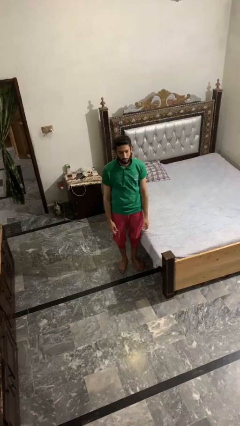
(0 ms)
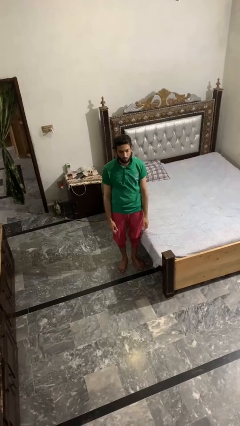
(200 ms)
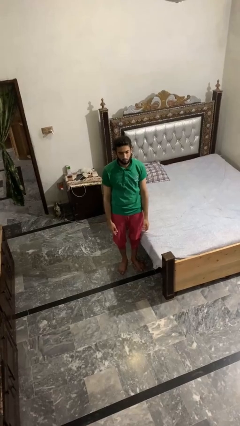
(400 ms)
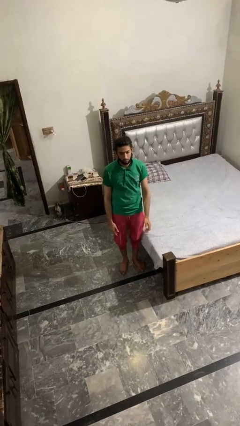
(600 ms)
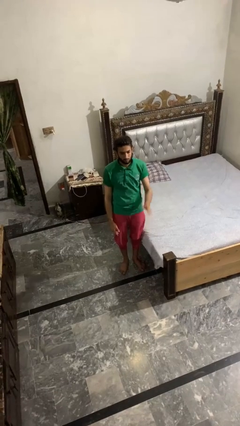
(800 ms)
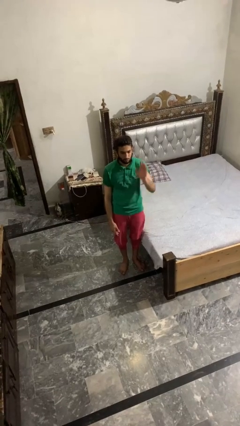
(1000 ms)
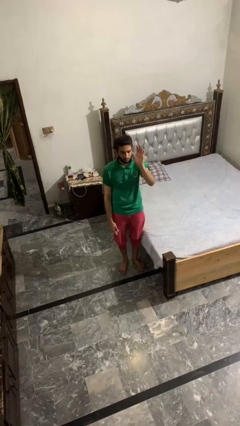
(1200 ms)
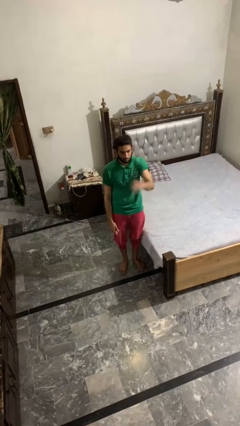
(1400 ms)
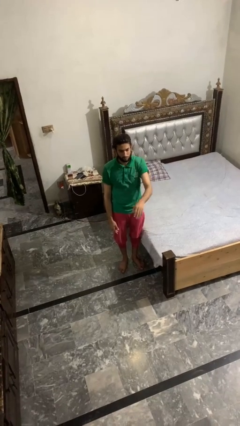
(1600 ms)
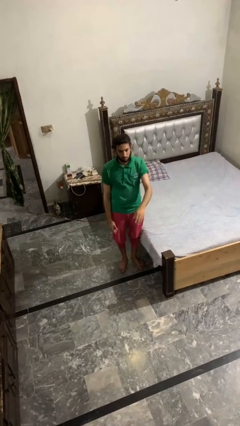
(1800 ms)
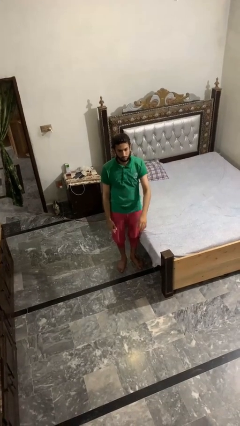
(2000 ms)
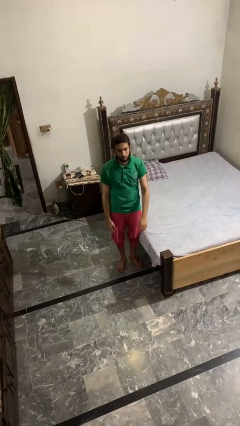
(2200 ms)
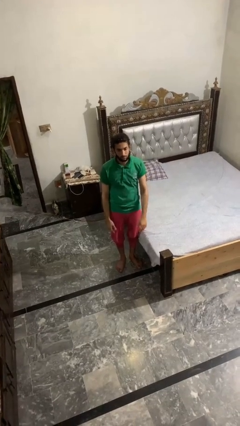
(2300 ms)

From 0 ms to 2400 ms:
person gestures swipe down

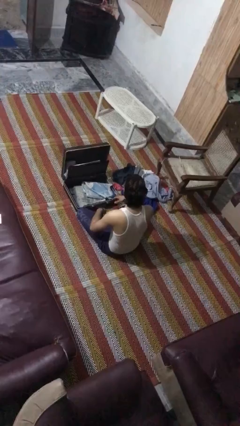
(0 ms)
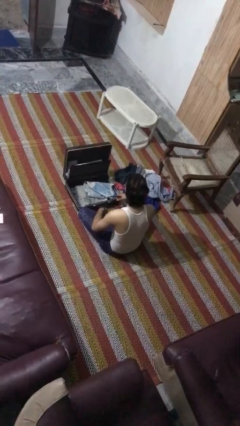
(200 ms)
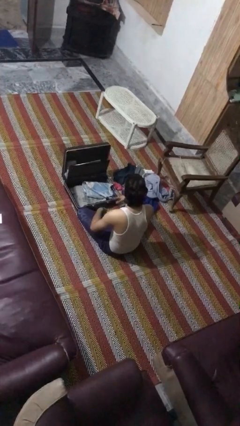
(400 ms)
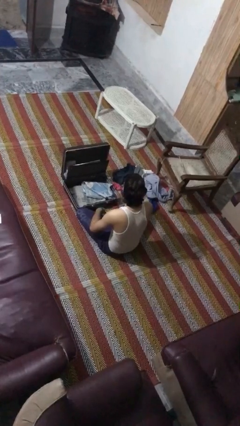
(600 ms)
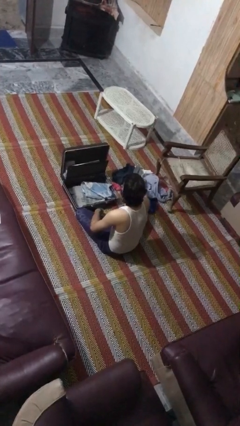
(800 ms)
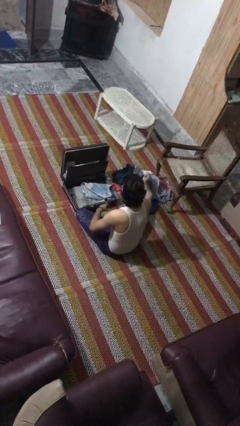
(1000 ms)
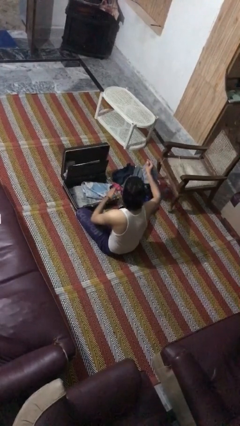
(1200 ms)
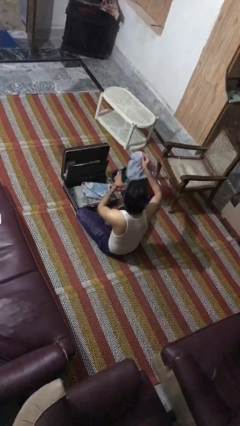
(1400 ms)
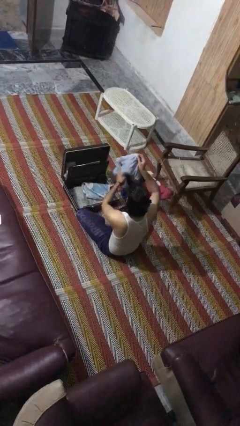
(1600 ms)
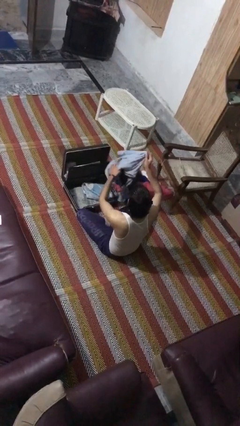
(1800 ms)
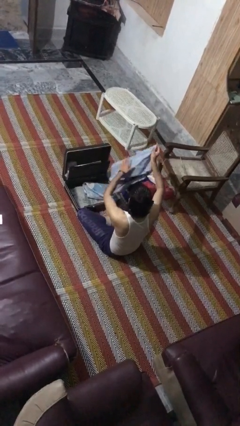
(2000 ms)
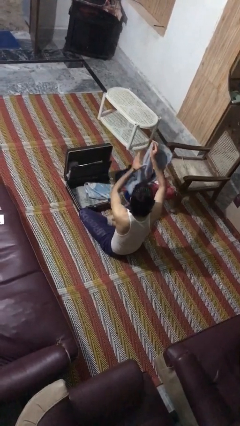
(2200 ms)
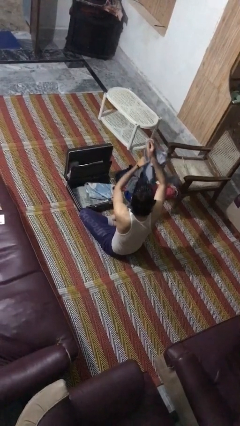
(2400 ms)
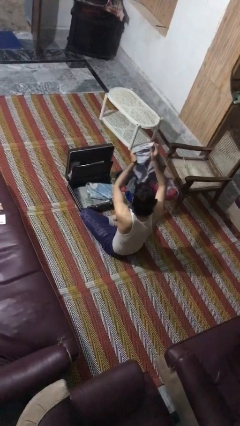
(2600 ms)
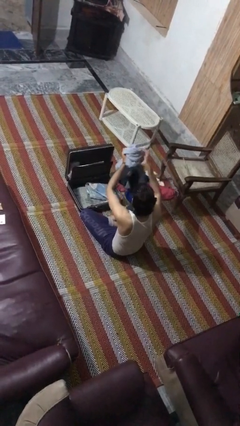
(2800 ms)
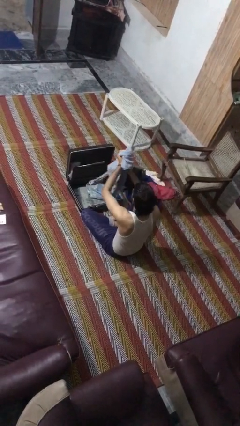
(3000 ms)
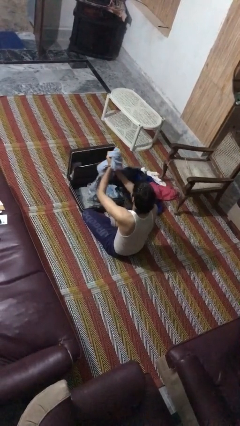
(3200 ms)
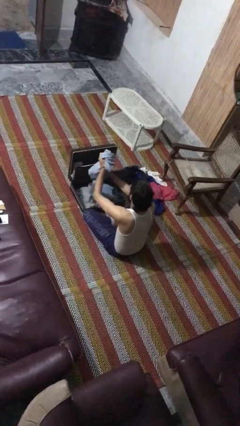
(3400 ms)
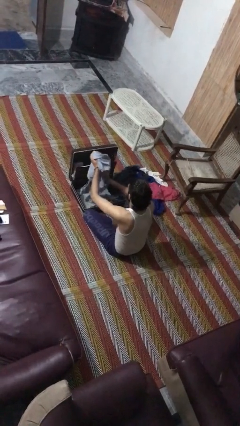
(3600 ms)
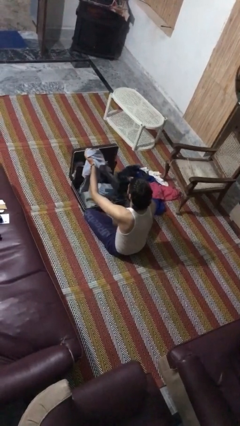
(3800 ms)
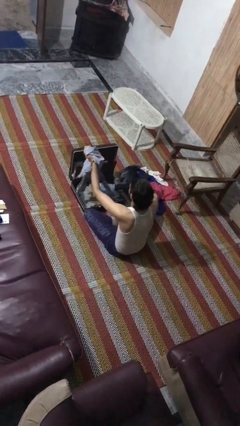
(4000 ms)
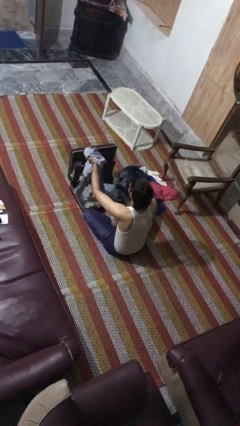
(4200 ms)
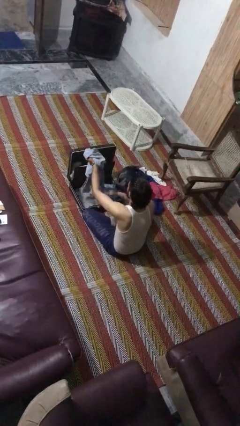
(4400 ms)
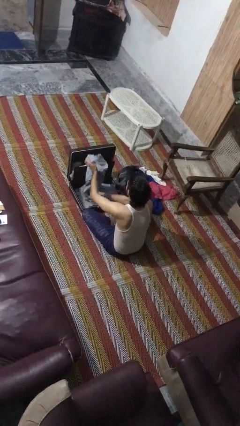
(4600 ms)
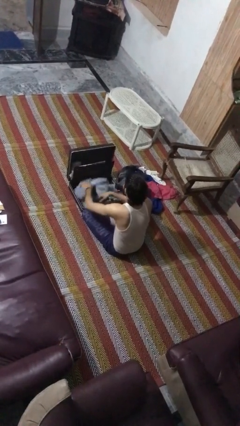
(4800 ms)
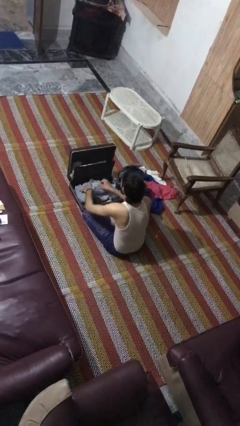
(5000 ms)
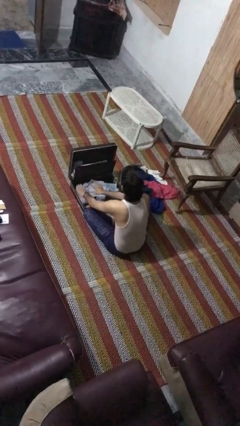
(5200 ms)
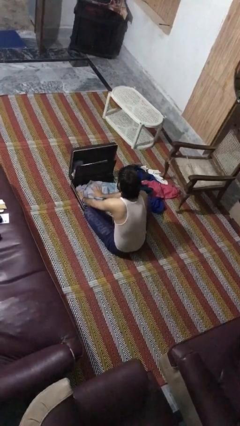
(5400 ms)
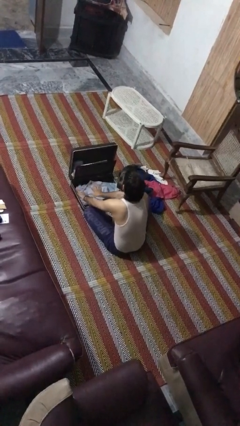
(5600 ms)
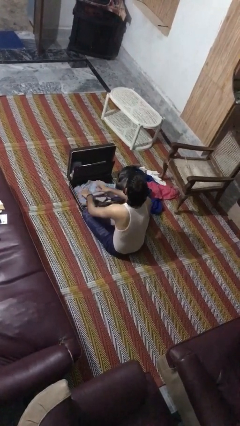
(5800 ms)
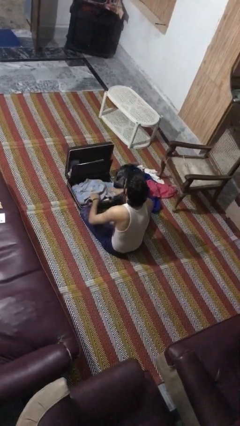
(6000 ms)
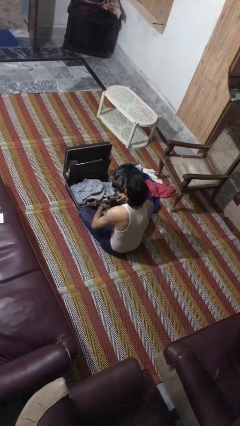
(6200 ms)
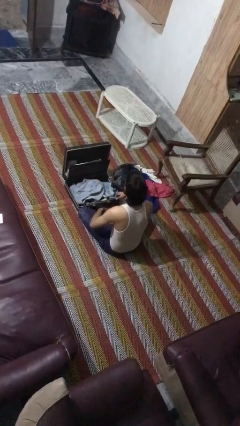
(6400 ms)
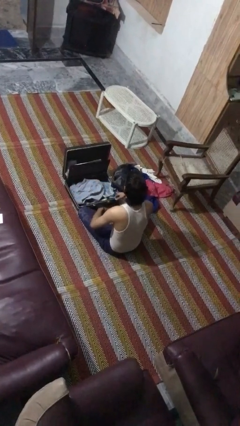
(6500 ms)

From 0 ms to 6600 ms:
person loads clothes into suitcase

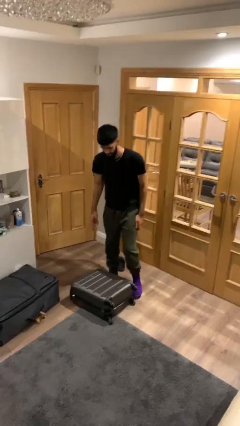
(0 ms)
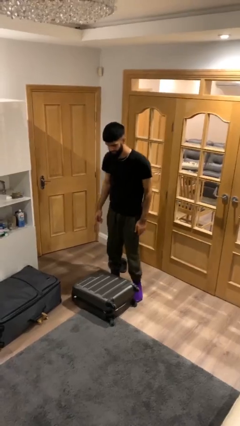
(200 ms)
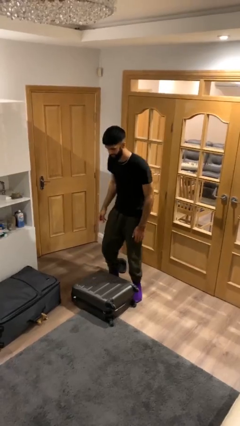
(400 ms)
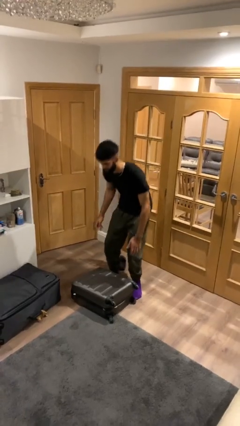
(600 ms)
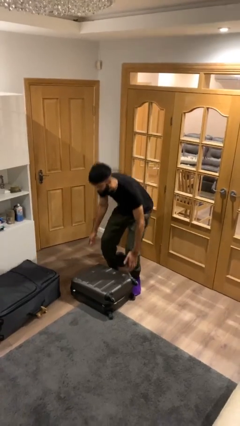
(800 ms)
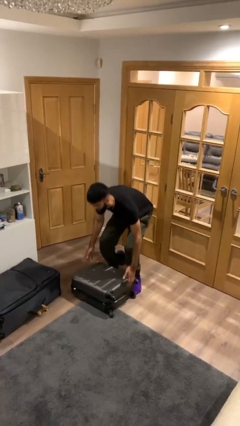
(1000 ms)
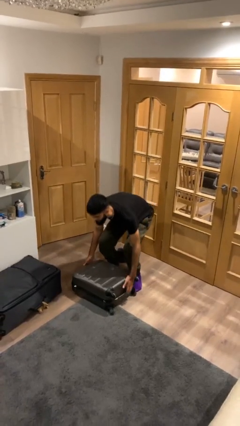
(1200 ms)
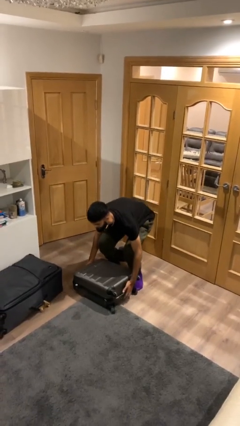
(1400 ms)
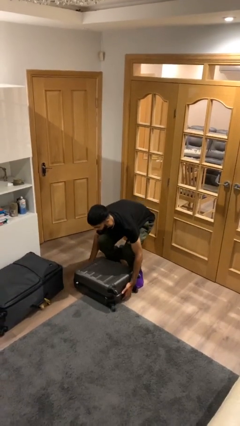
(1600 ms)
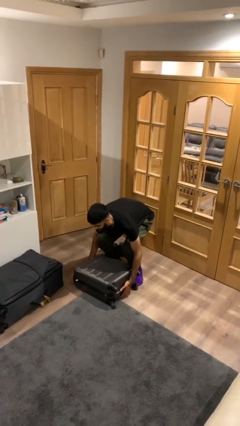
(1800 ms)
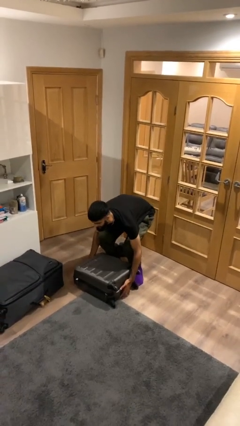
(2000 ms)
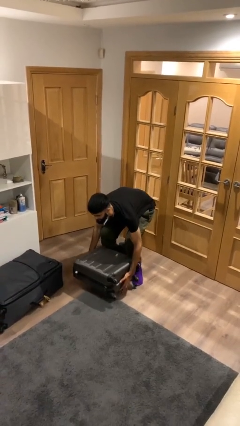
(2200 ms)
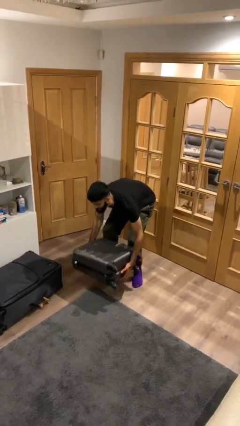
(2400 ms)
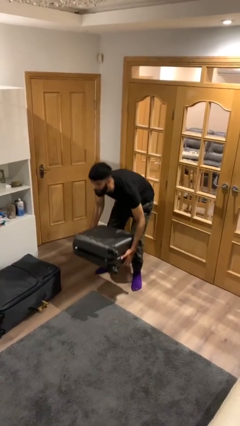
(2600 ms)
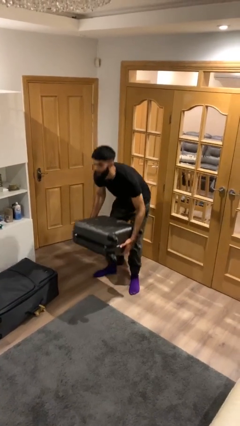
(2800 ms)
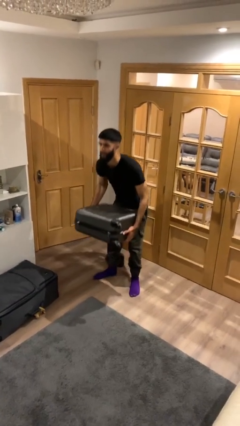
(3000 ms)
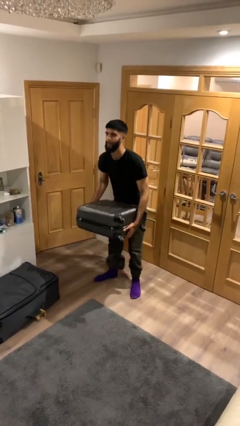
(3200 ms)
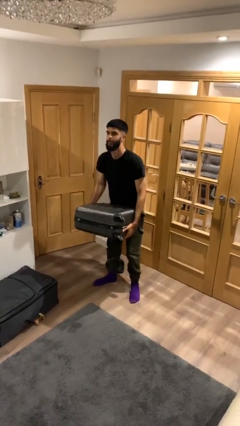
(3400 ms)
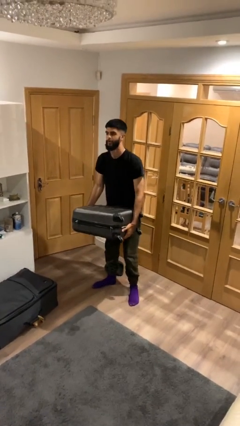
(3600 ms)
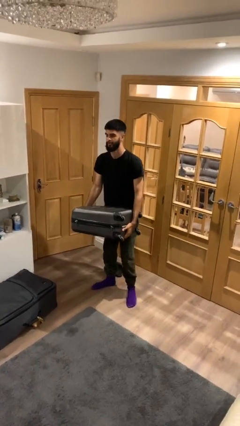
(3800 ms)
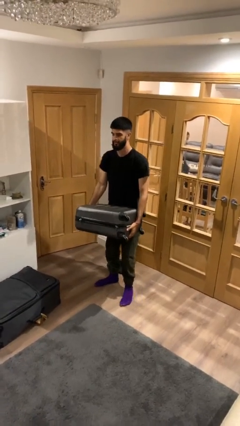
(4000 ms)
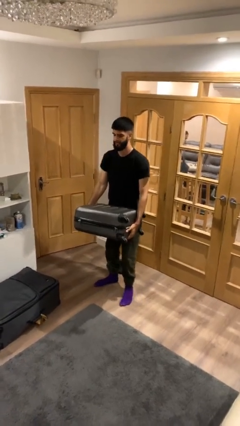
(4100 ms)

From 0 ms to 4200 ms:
person picks up object from floor

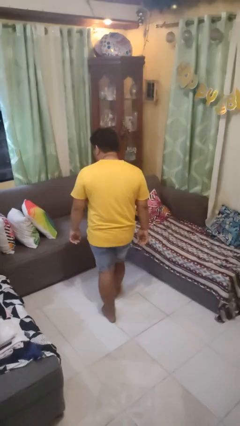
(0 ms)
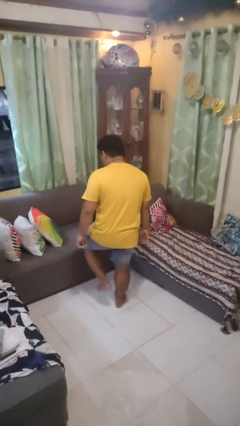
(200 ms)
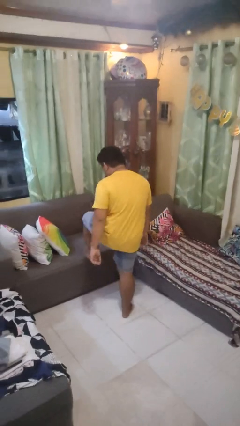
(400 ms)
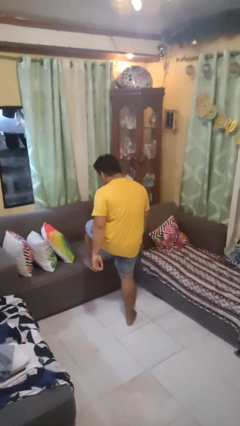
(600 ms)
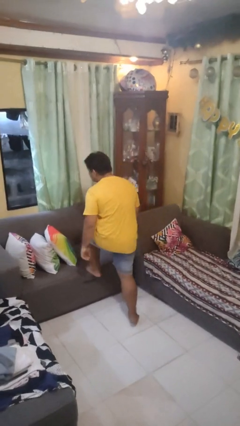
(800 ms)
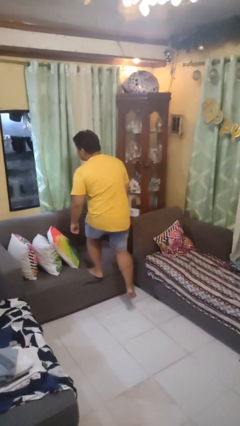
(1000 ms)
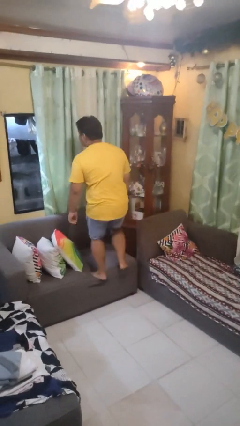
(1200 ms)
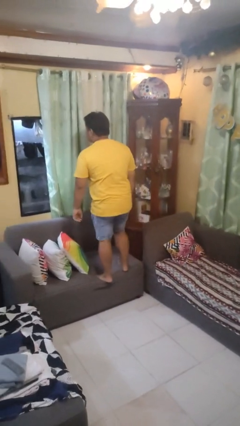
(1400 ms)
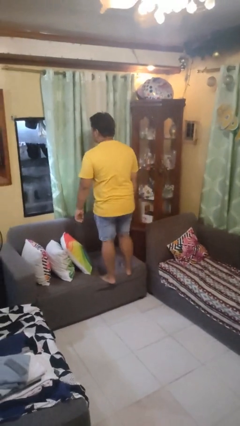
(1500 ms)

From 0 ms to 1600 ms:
person climbs on couch

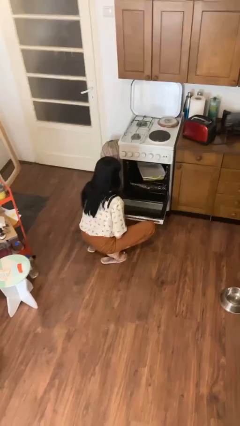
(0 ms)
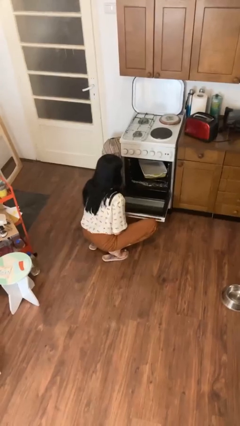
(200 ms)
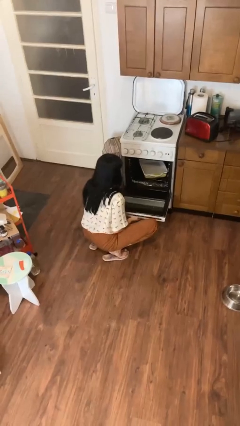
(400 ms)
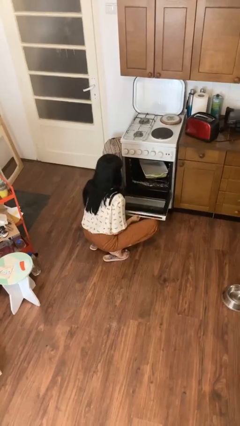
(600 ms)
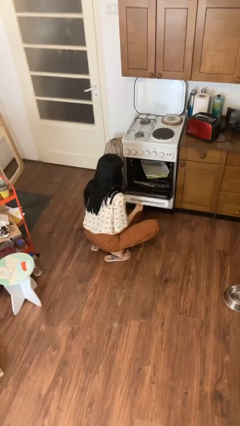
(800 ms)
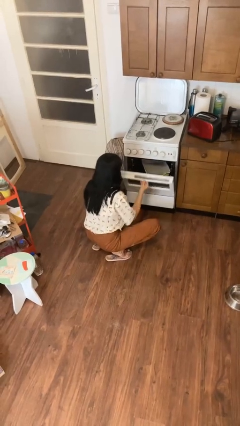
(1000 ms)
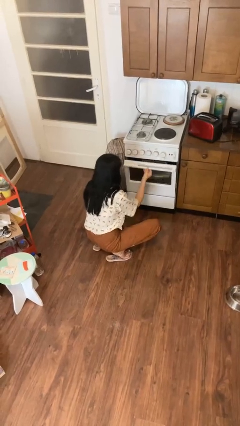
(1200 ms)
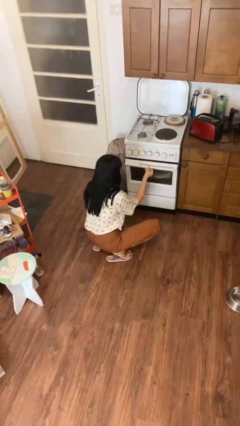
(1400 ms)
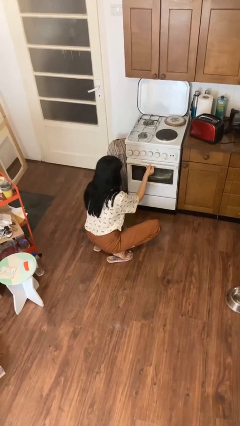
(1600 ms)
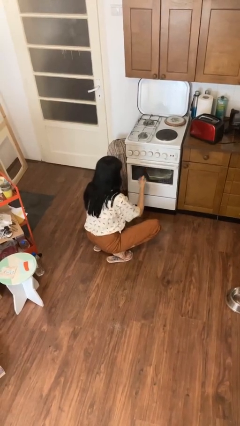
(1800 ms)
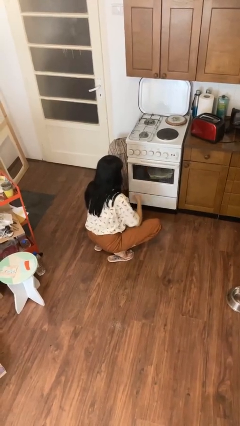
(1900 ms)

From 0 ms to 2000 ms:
person closes oven door

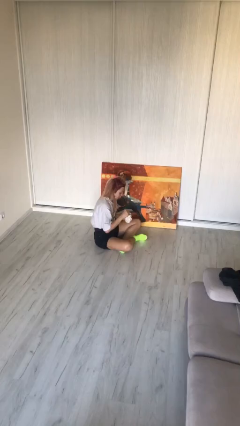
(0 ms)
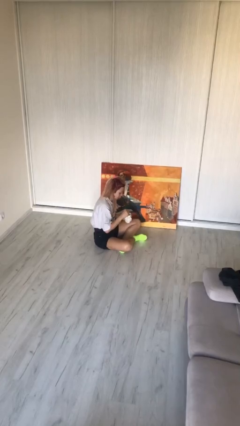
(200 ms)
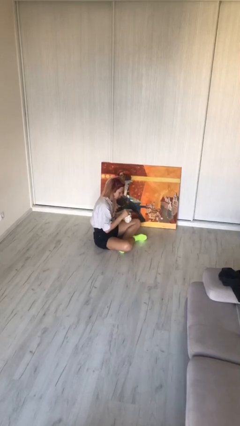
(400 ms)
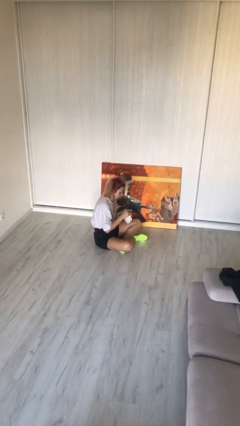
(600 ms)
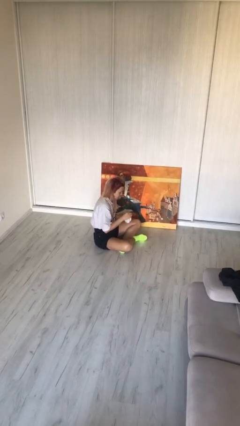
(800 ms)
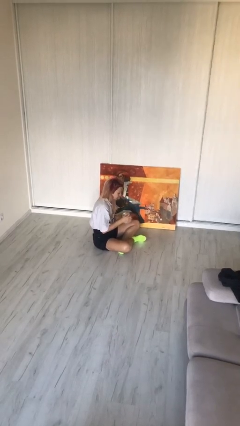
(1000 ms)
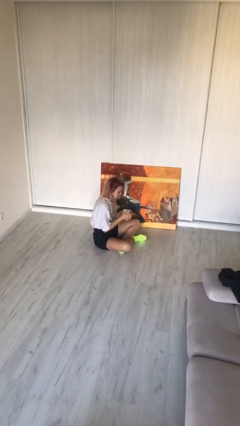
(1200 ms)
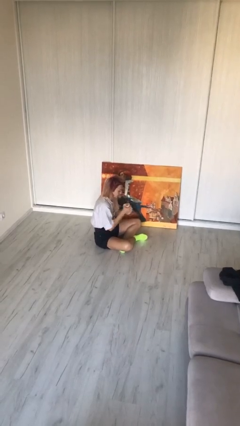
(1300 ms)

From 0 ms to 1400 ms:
person stirs mug
